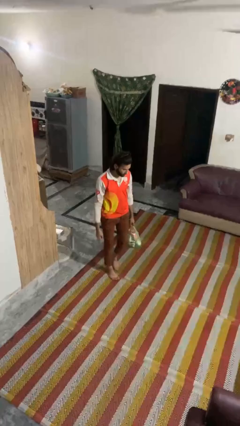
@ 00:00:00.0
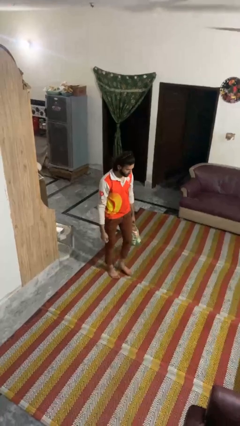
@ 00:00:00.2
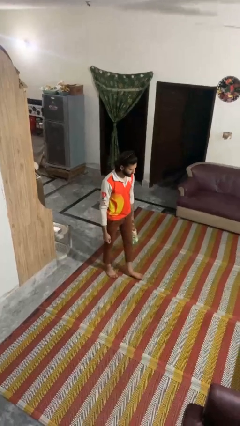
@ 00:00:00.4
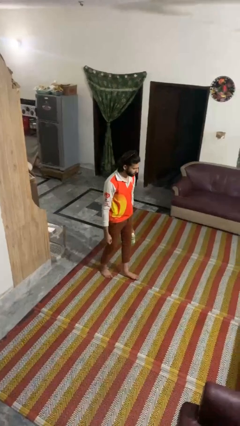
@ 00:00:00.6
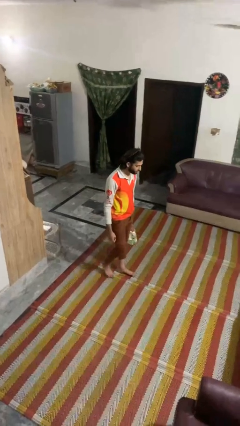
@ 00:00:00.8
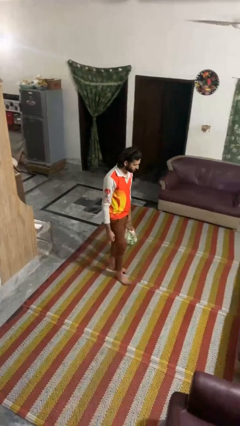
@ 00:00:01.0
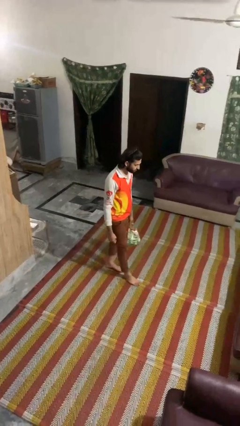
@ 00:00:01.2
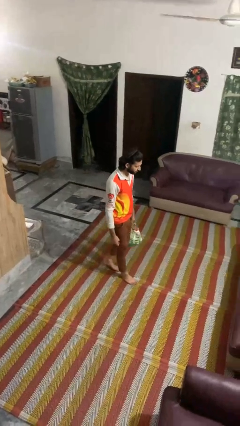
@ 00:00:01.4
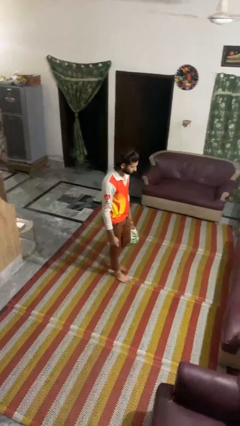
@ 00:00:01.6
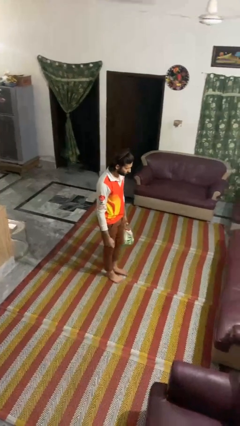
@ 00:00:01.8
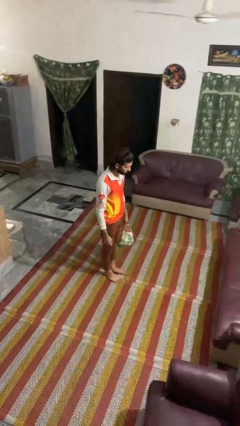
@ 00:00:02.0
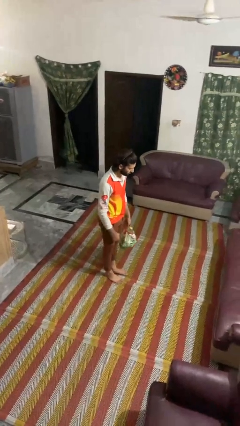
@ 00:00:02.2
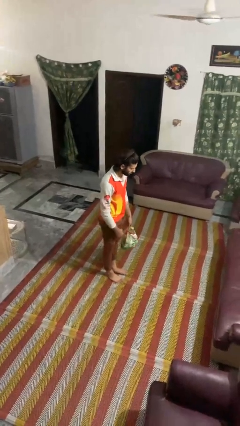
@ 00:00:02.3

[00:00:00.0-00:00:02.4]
person carries groceries

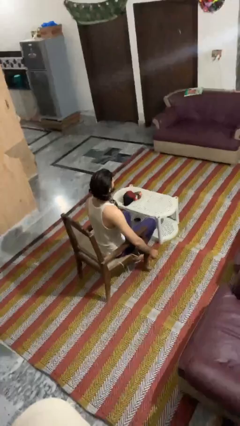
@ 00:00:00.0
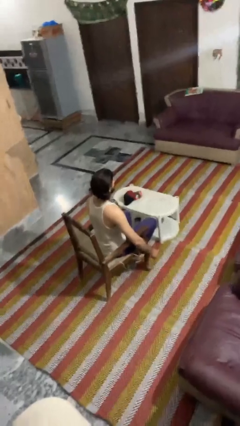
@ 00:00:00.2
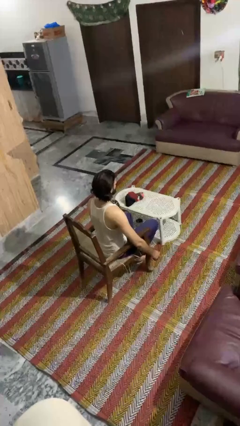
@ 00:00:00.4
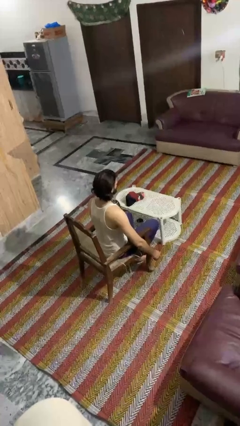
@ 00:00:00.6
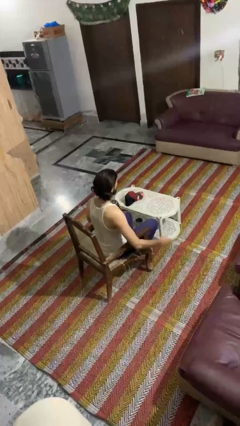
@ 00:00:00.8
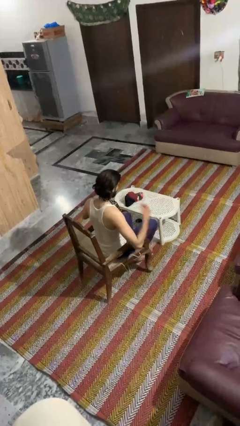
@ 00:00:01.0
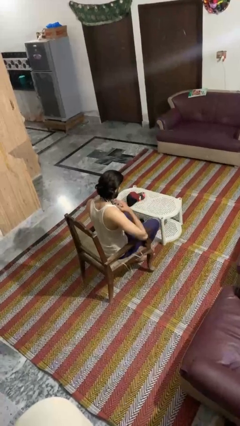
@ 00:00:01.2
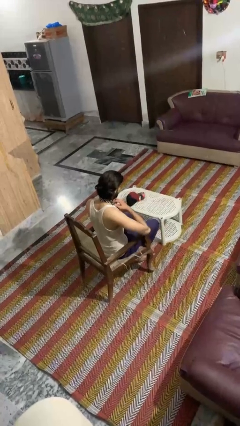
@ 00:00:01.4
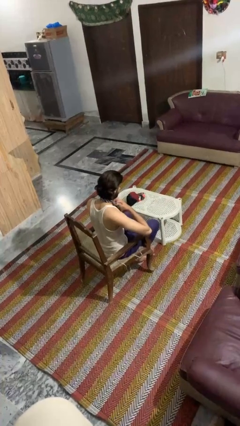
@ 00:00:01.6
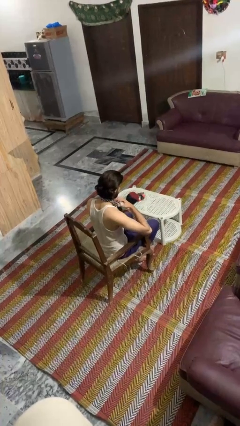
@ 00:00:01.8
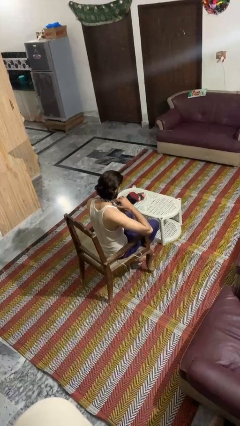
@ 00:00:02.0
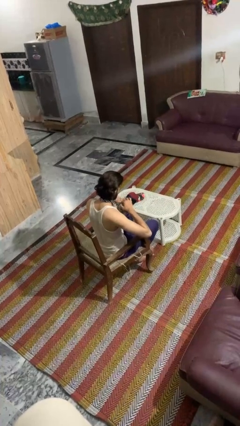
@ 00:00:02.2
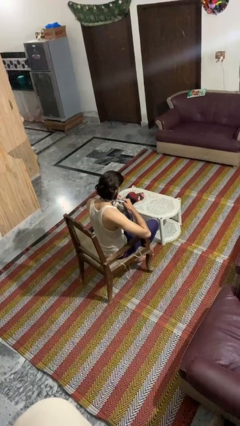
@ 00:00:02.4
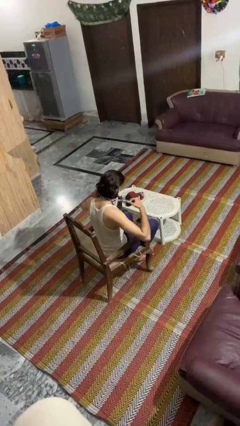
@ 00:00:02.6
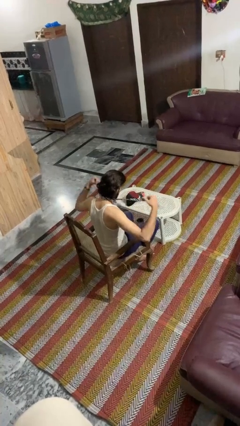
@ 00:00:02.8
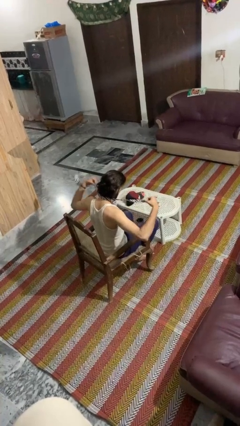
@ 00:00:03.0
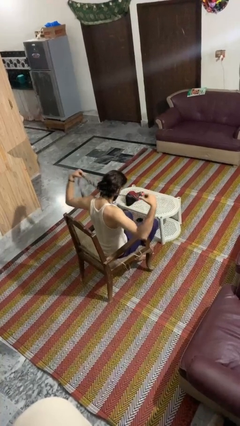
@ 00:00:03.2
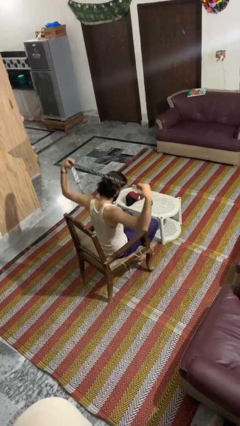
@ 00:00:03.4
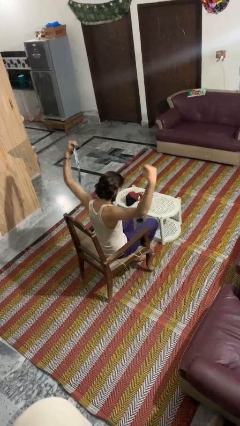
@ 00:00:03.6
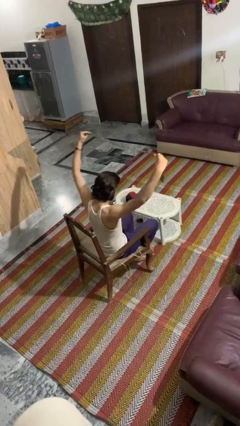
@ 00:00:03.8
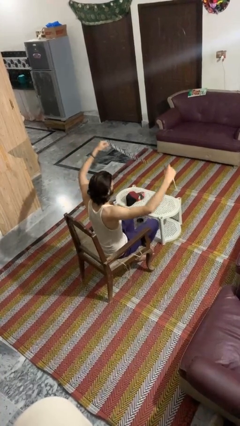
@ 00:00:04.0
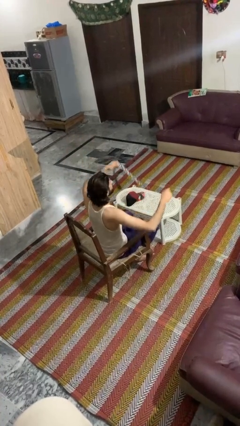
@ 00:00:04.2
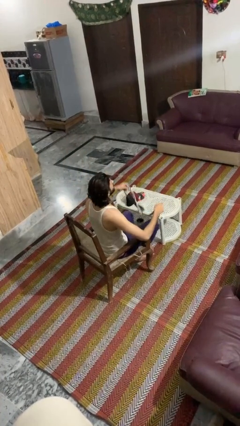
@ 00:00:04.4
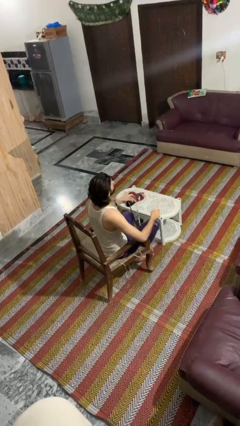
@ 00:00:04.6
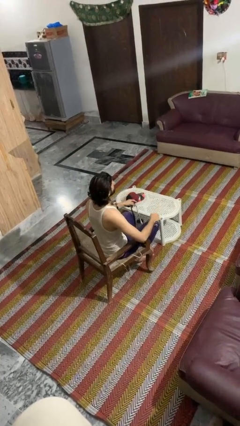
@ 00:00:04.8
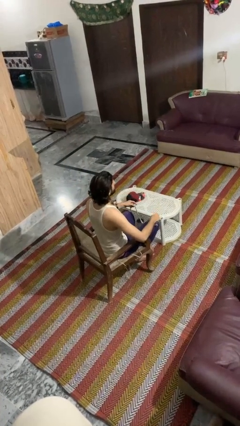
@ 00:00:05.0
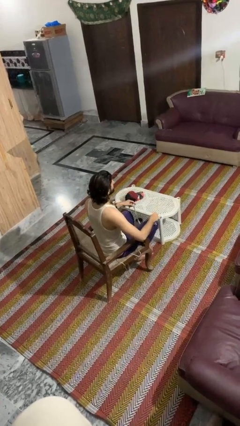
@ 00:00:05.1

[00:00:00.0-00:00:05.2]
person takes off necktie

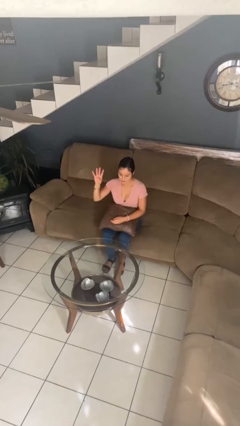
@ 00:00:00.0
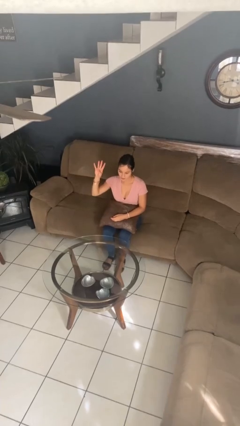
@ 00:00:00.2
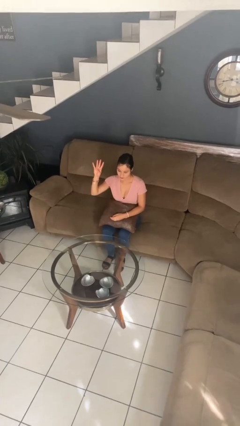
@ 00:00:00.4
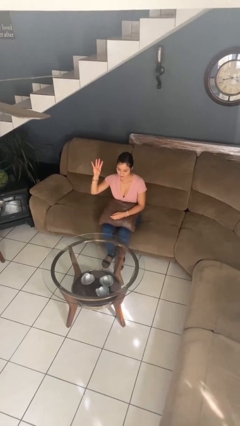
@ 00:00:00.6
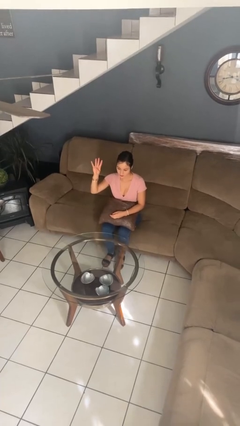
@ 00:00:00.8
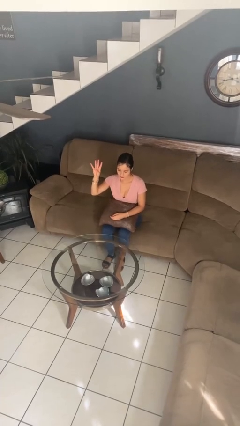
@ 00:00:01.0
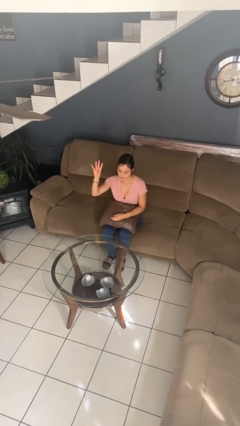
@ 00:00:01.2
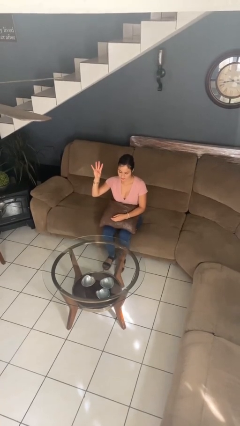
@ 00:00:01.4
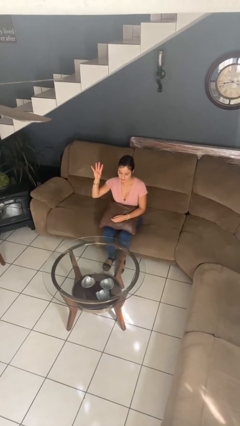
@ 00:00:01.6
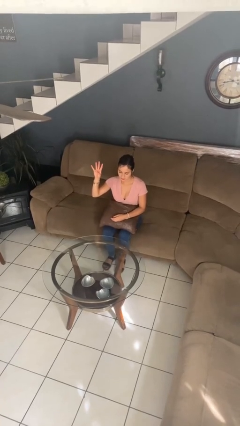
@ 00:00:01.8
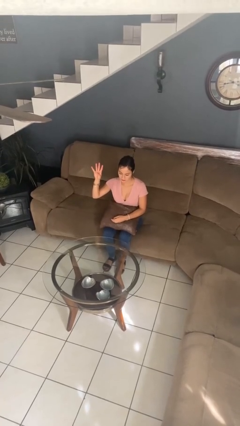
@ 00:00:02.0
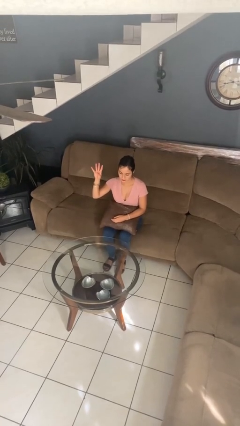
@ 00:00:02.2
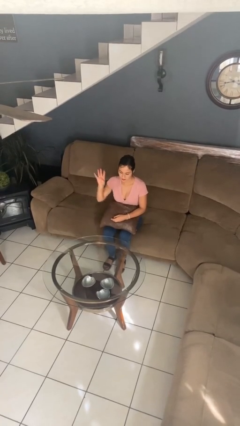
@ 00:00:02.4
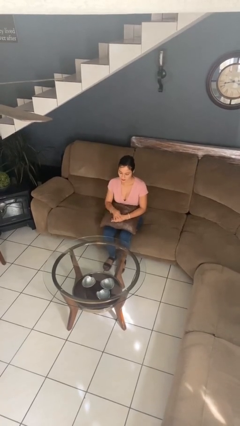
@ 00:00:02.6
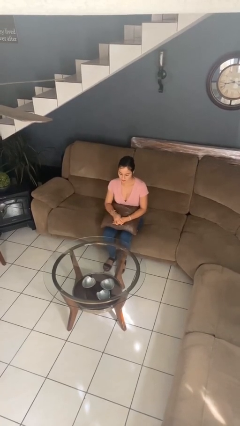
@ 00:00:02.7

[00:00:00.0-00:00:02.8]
person gestures number four

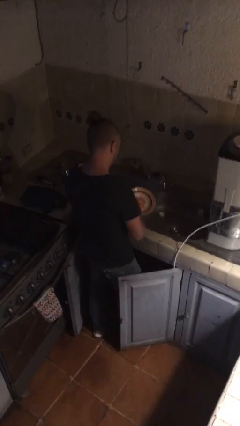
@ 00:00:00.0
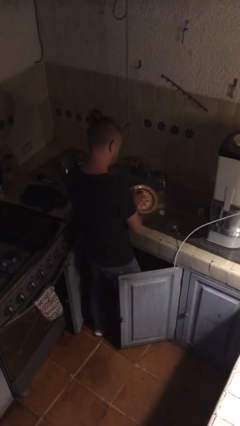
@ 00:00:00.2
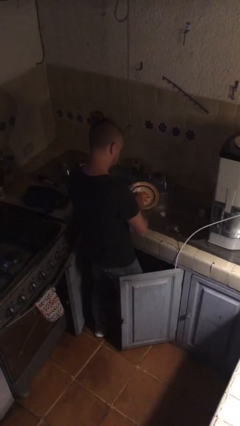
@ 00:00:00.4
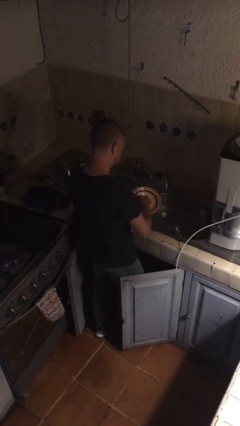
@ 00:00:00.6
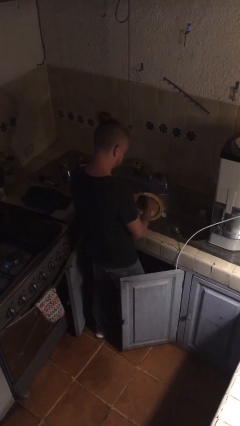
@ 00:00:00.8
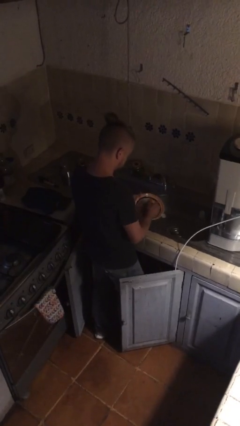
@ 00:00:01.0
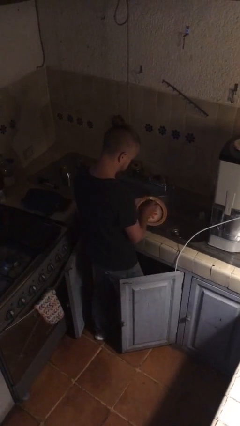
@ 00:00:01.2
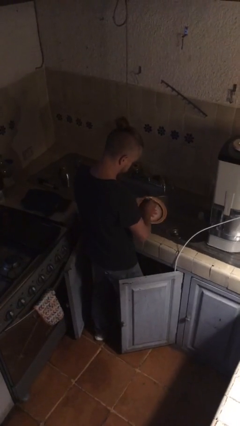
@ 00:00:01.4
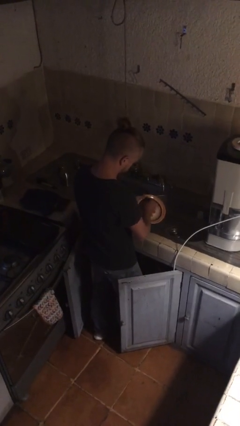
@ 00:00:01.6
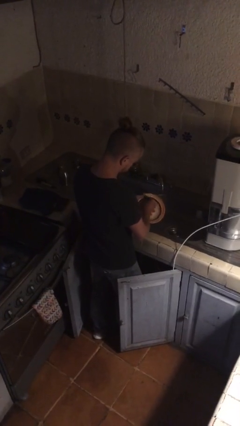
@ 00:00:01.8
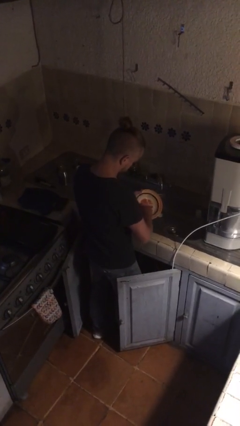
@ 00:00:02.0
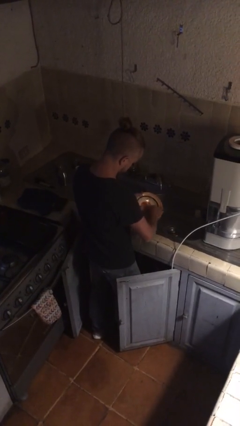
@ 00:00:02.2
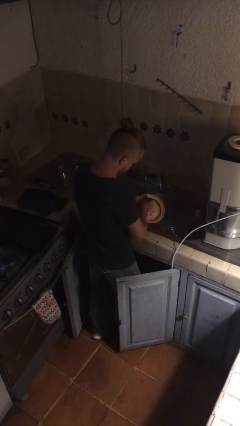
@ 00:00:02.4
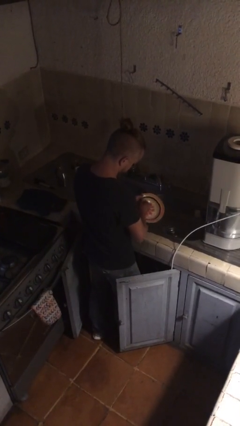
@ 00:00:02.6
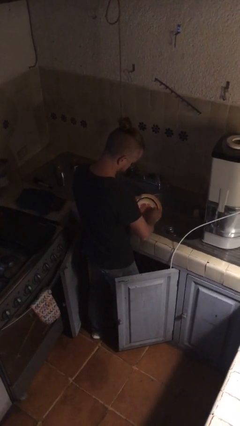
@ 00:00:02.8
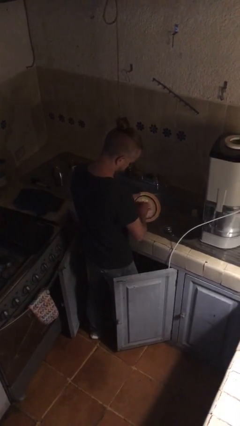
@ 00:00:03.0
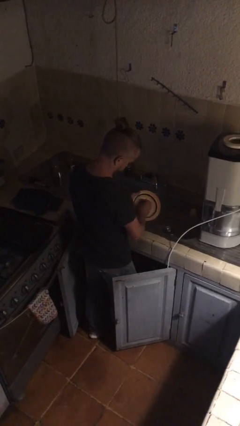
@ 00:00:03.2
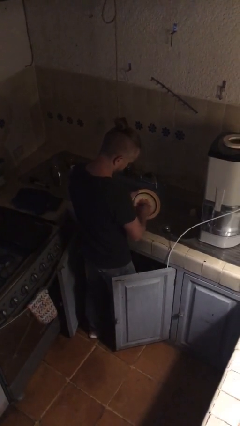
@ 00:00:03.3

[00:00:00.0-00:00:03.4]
person washes dish

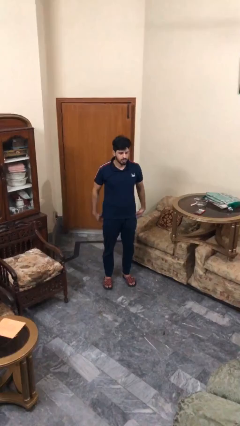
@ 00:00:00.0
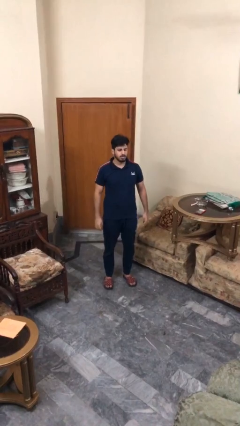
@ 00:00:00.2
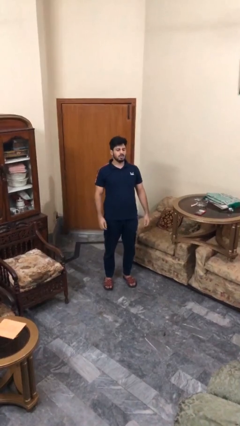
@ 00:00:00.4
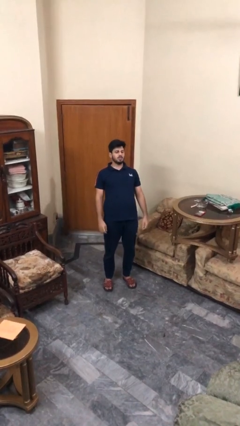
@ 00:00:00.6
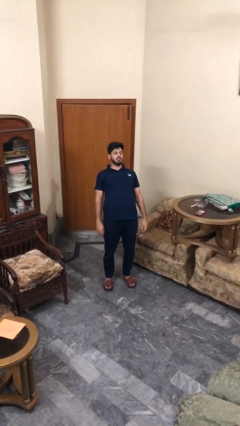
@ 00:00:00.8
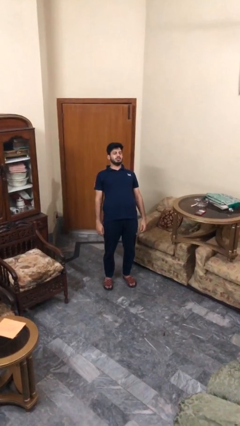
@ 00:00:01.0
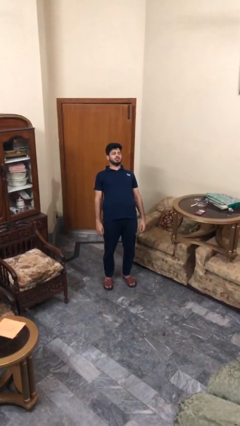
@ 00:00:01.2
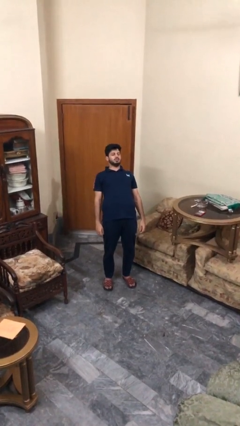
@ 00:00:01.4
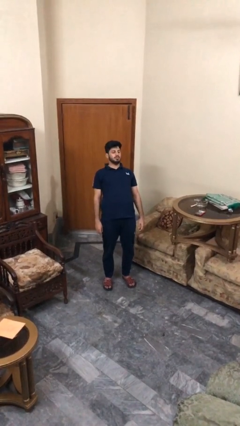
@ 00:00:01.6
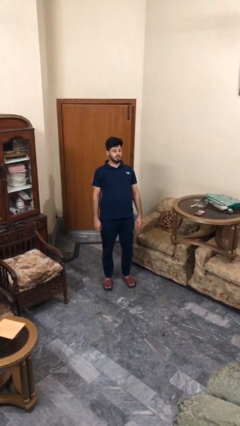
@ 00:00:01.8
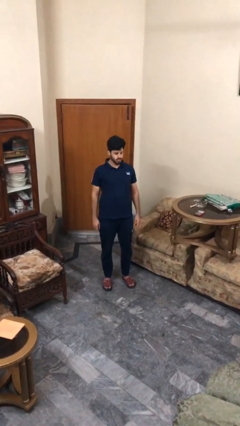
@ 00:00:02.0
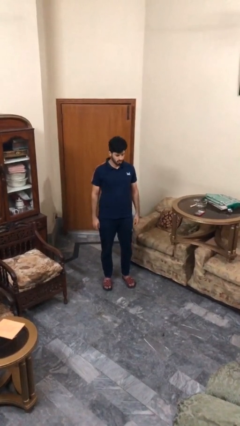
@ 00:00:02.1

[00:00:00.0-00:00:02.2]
person stretches back

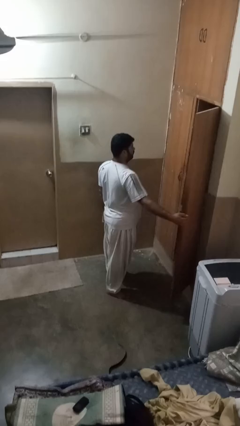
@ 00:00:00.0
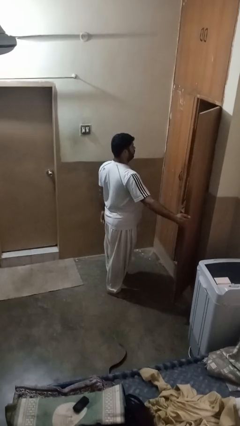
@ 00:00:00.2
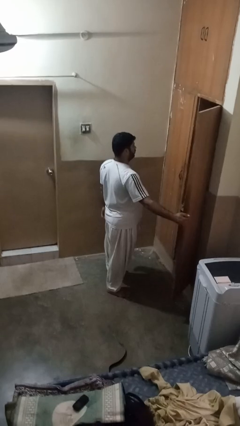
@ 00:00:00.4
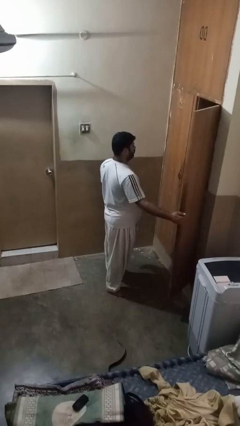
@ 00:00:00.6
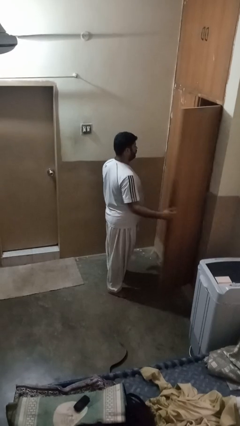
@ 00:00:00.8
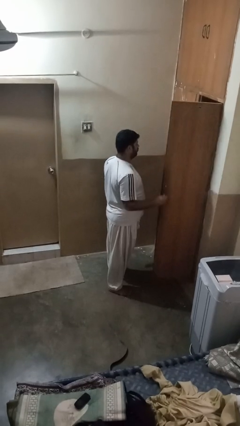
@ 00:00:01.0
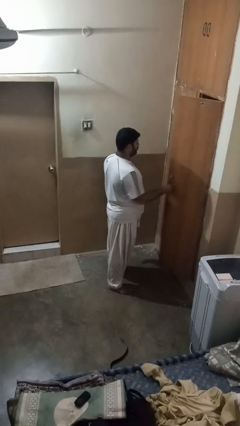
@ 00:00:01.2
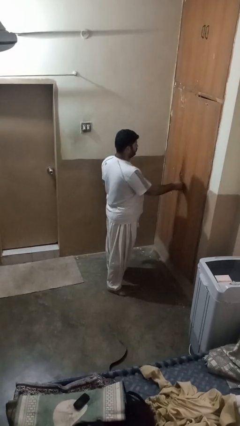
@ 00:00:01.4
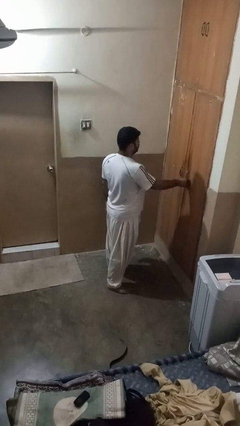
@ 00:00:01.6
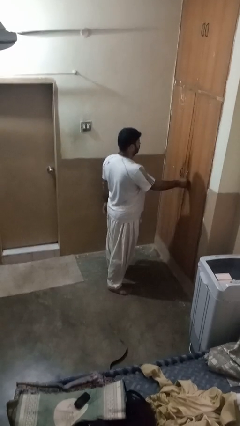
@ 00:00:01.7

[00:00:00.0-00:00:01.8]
person closes closet door
